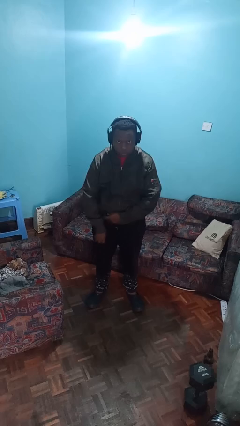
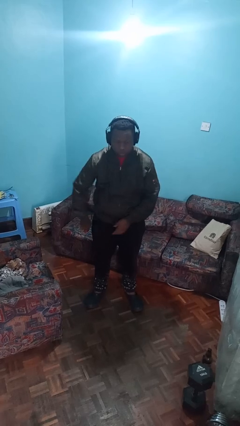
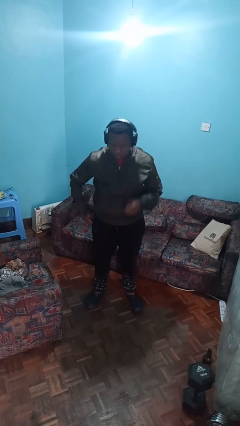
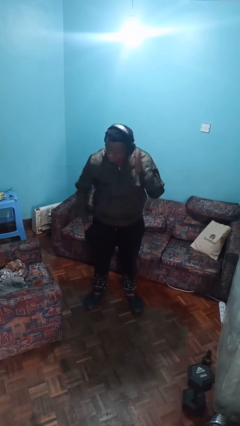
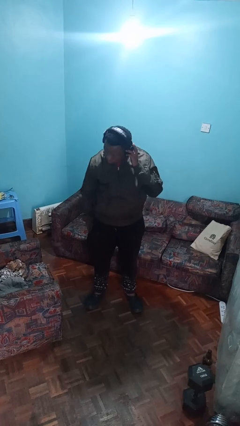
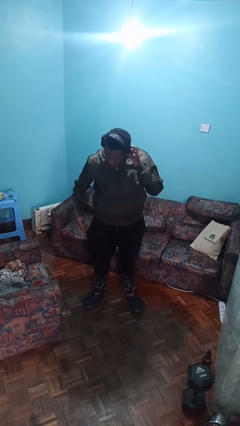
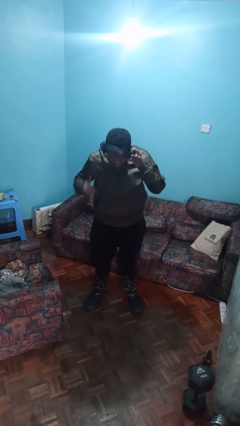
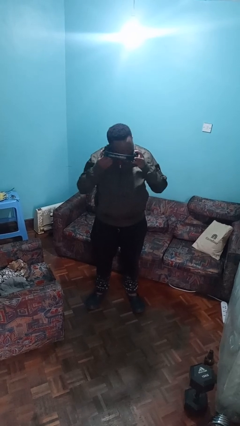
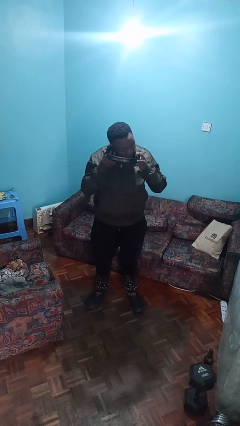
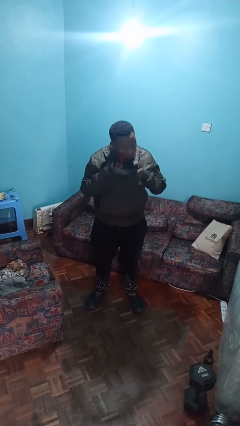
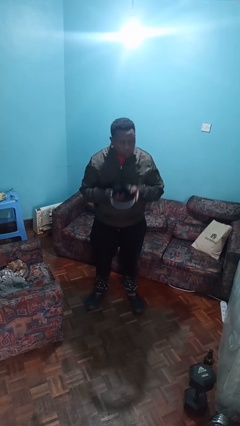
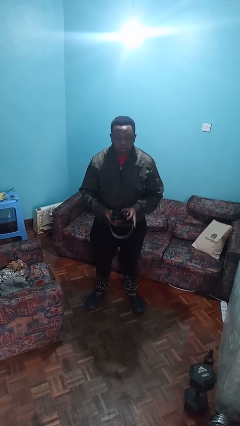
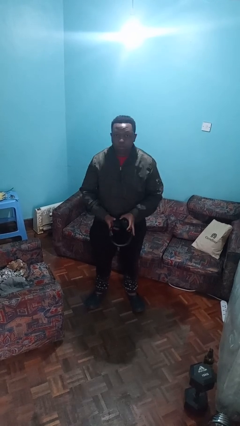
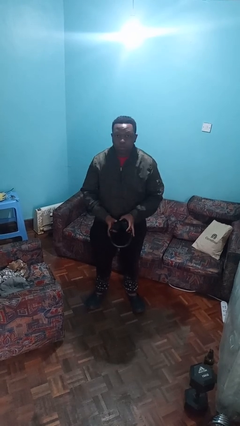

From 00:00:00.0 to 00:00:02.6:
person takes off headphones

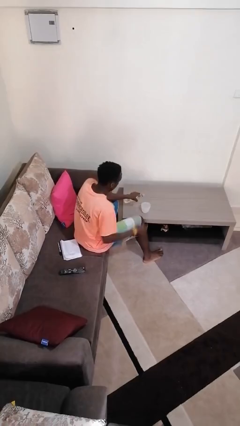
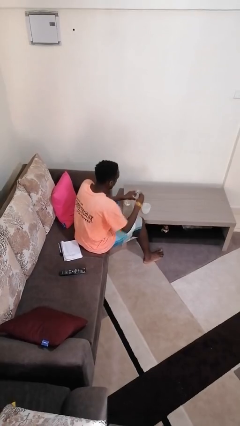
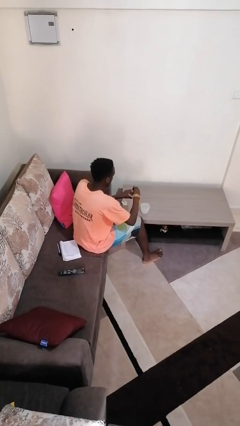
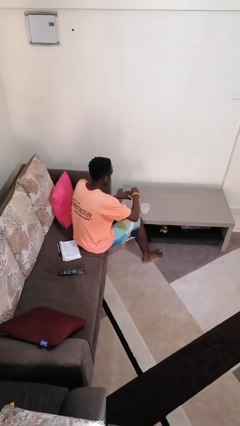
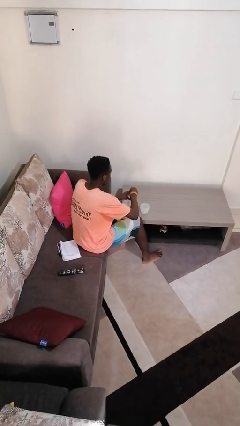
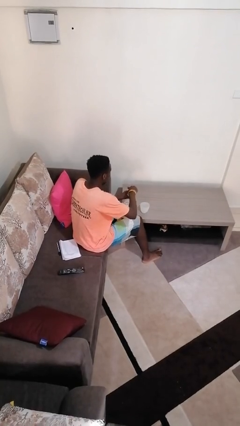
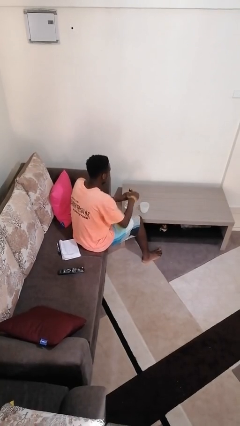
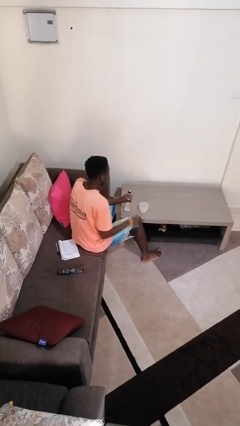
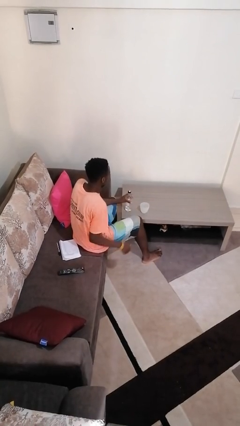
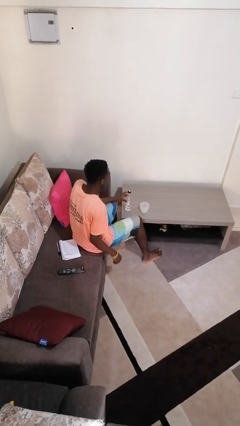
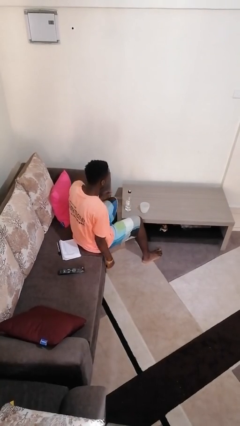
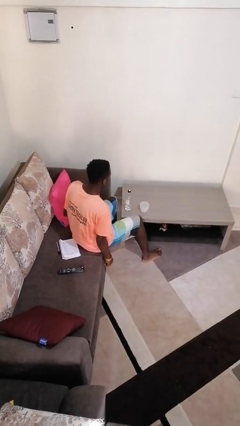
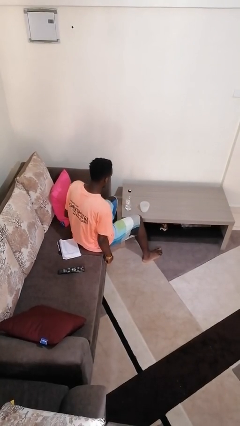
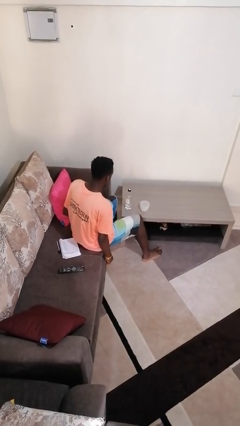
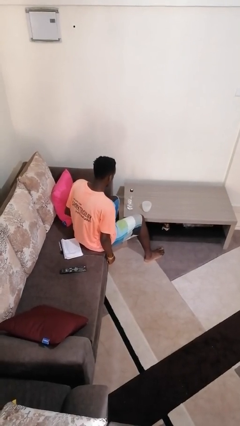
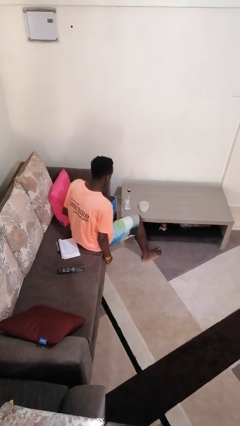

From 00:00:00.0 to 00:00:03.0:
person screws lid to bottle

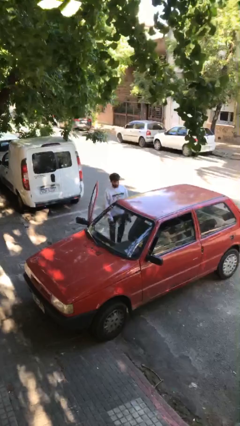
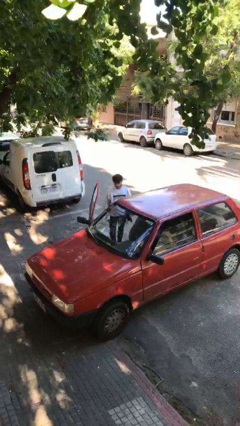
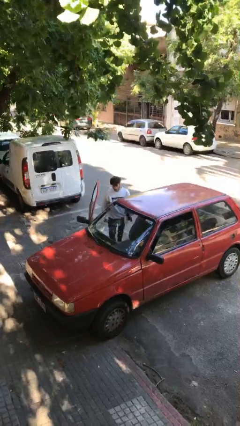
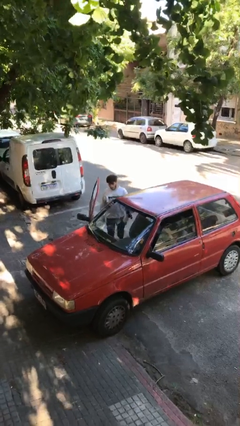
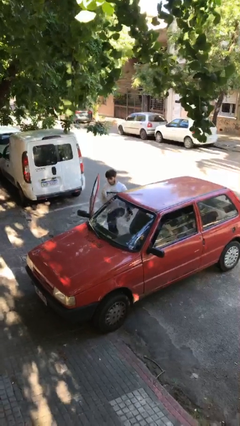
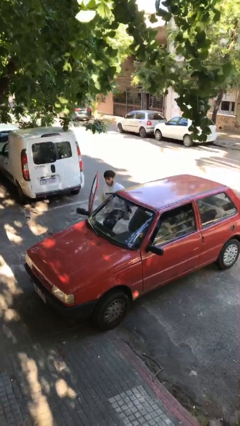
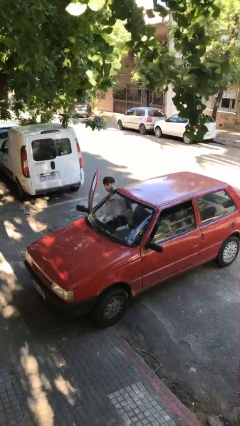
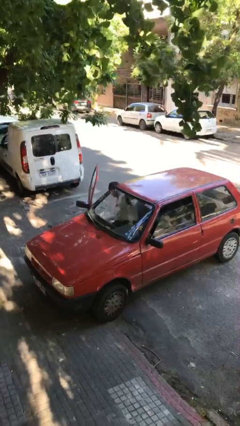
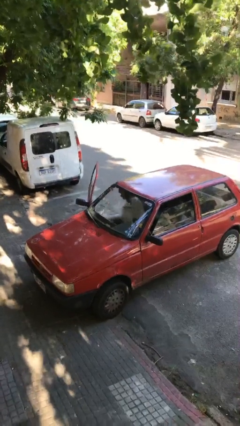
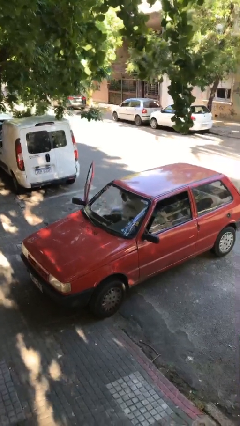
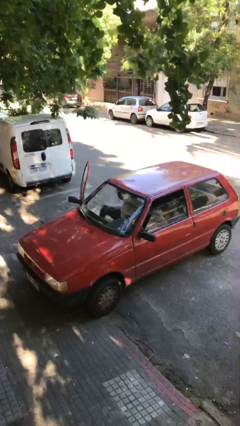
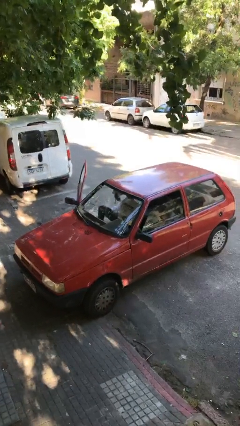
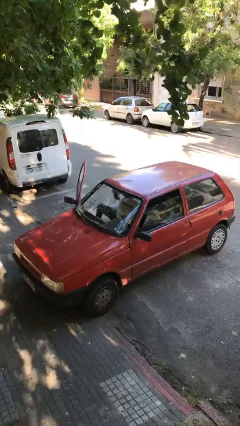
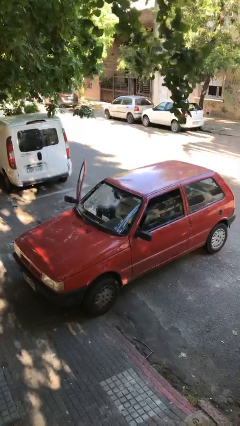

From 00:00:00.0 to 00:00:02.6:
person enters car

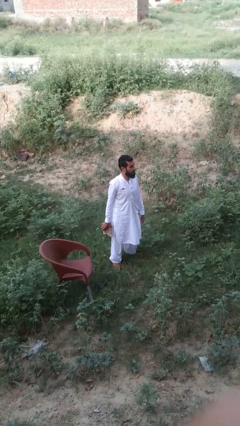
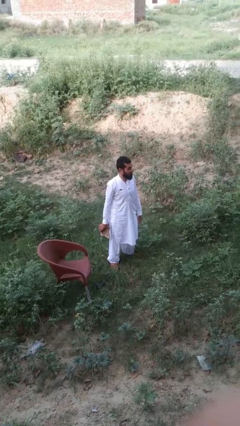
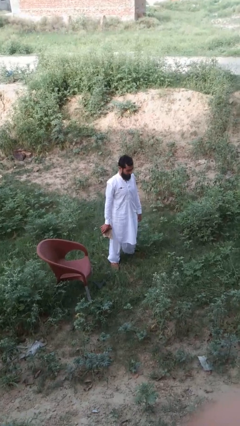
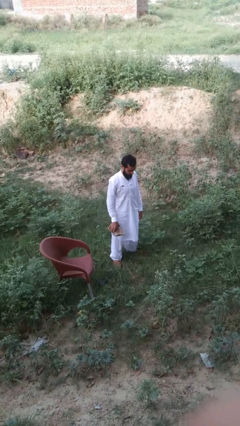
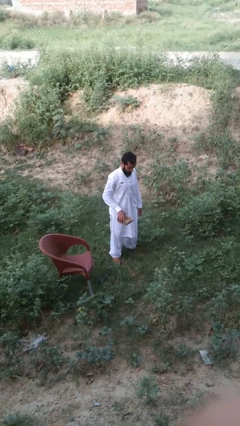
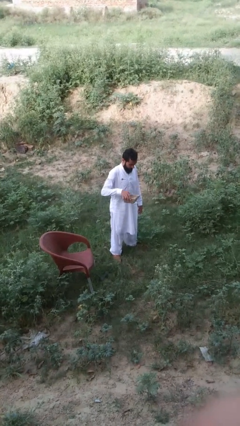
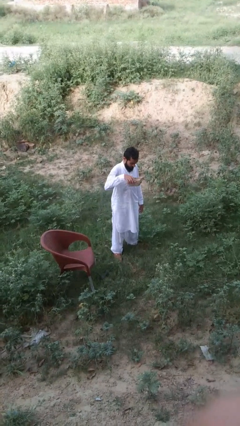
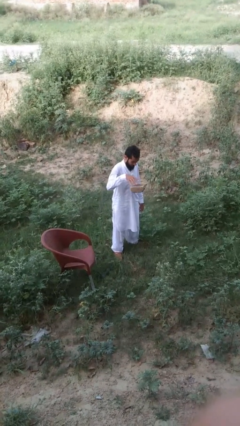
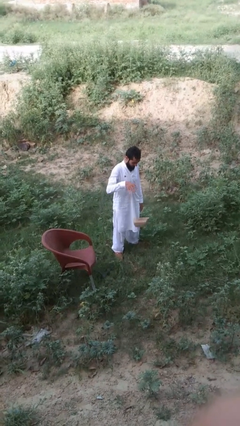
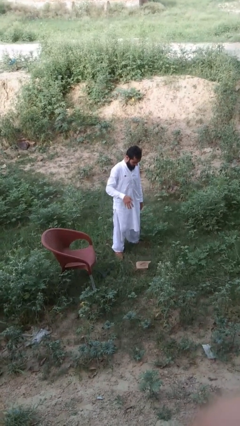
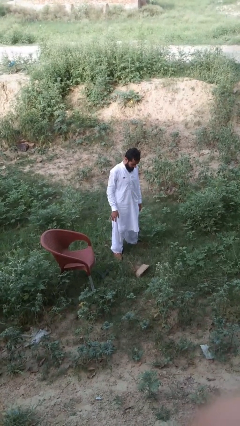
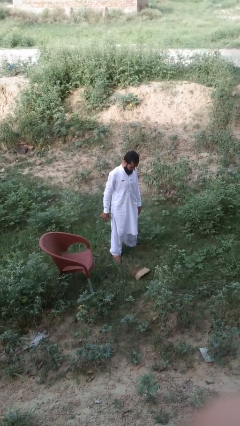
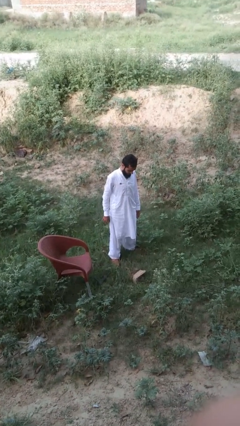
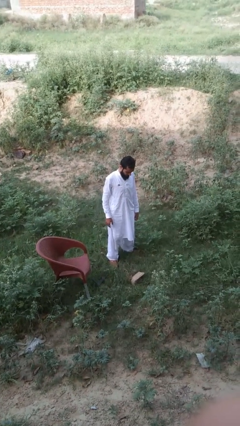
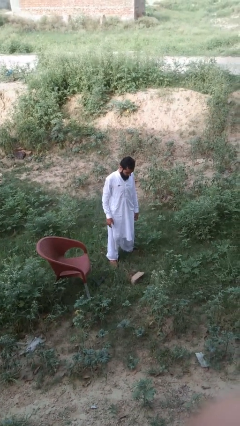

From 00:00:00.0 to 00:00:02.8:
person throws object to ground

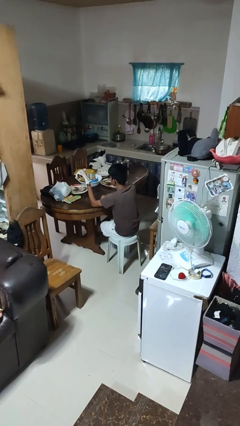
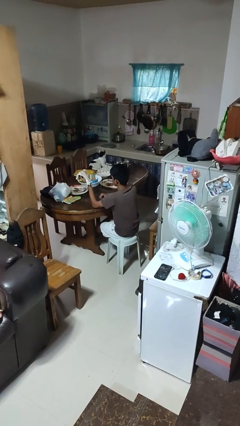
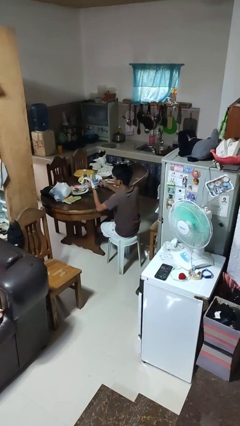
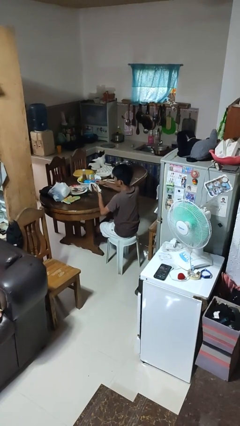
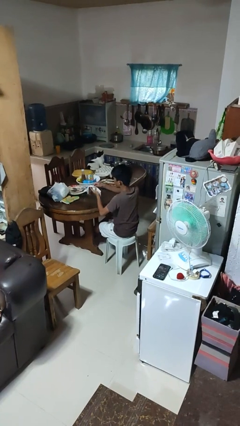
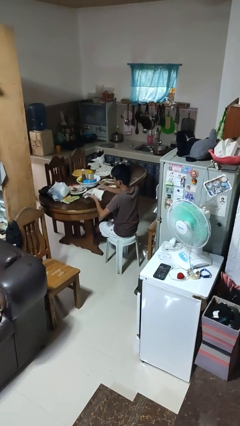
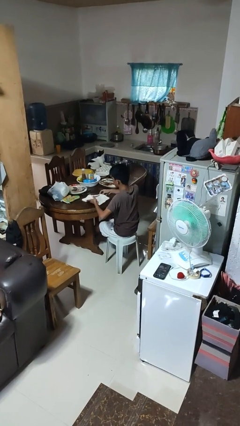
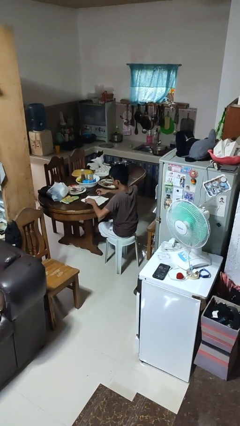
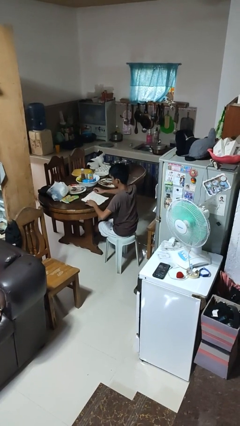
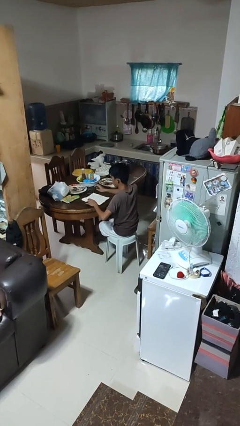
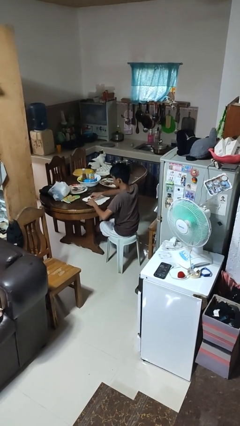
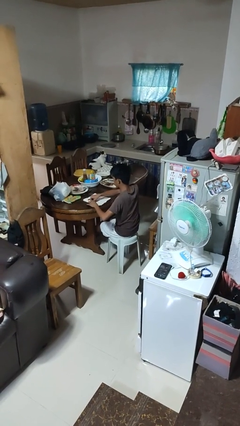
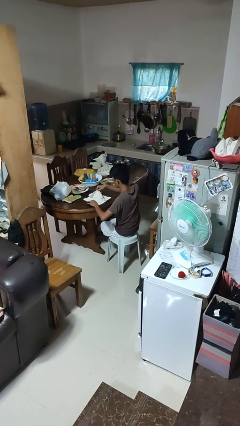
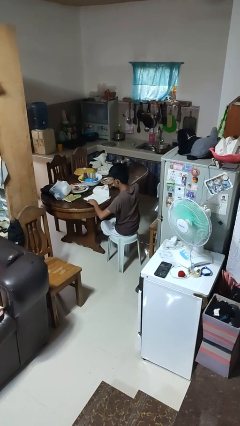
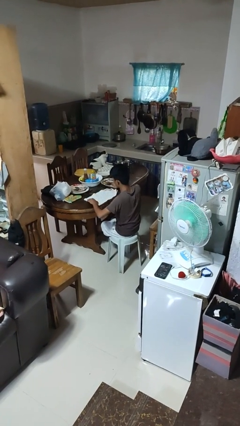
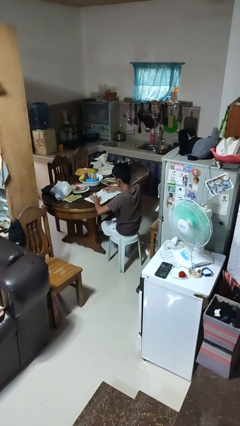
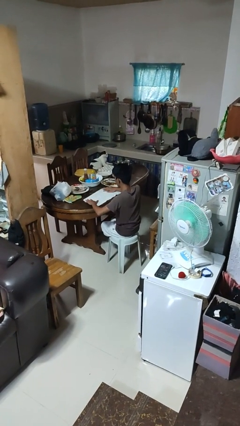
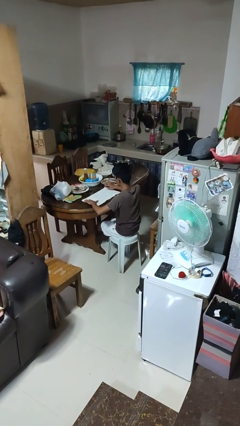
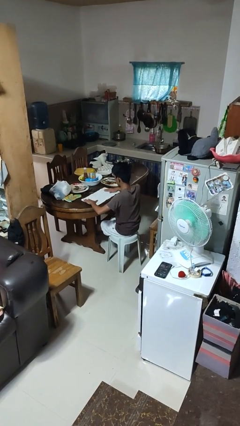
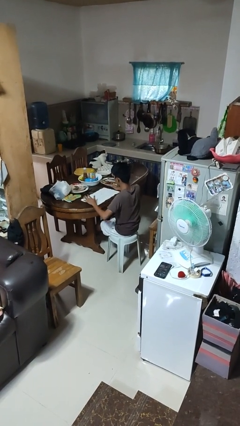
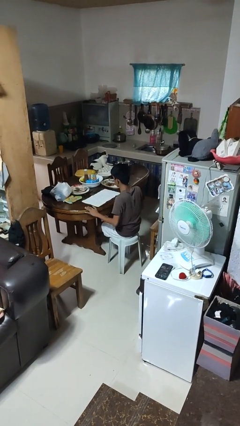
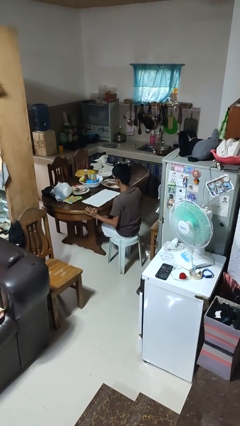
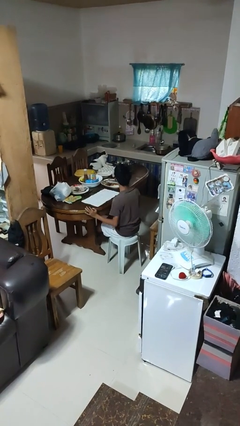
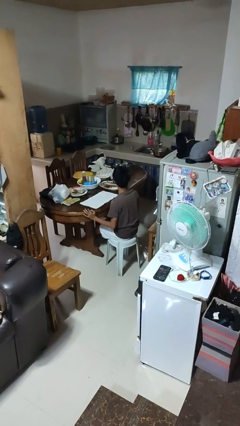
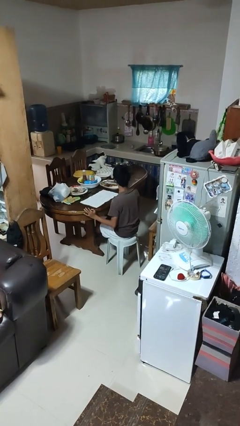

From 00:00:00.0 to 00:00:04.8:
person spreads tablecloth

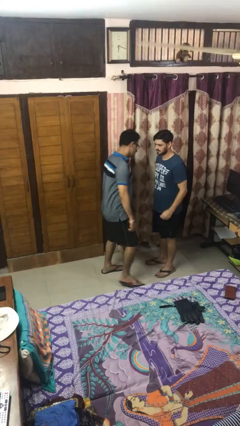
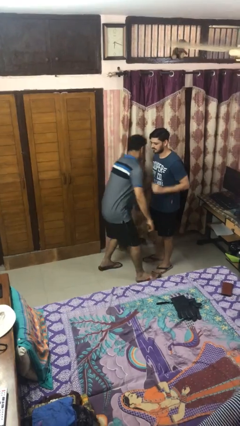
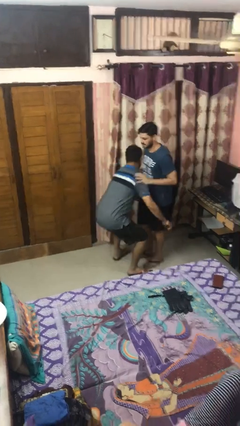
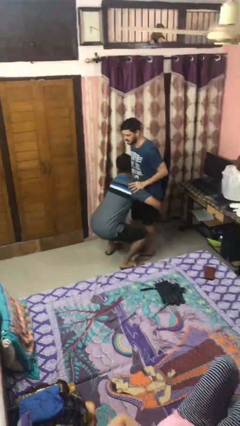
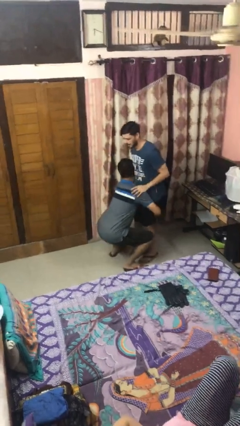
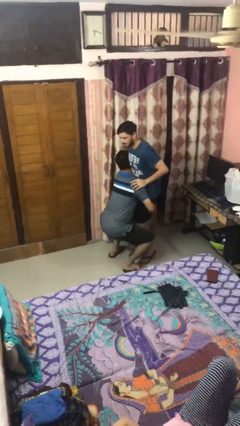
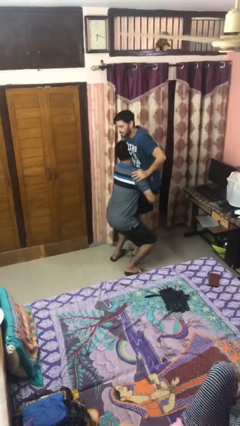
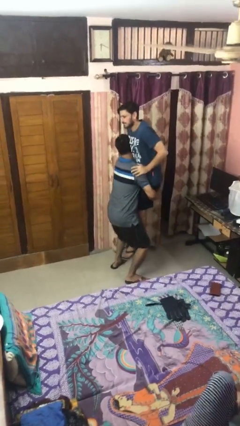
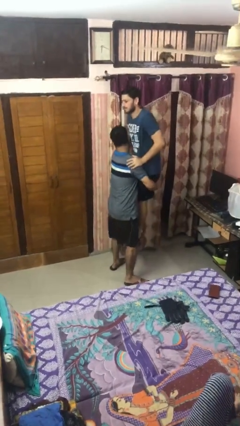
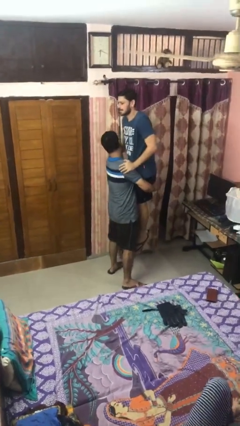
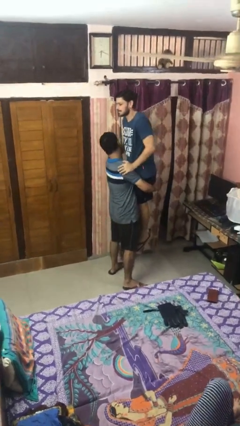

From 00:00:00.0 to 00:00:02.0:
person picks up person
